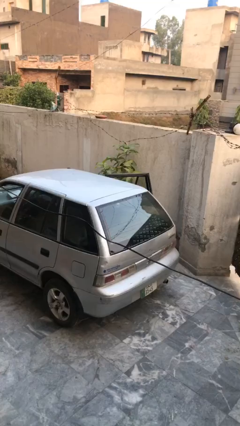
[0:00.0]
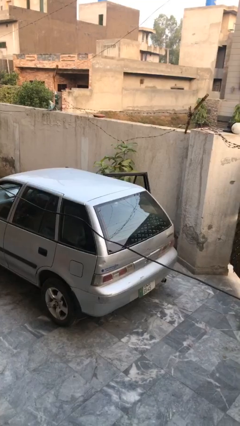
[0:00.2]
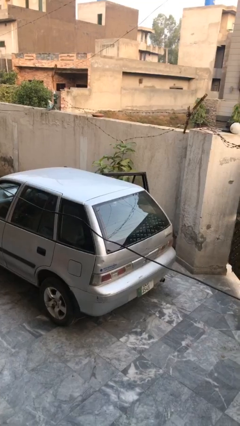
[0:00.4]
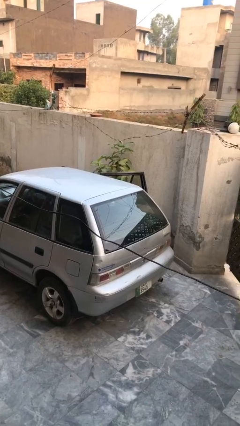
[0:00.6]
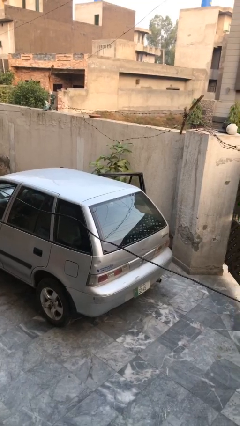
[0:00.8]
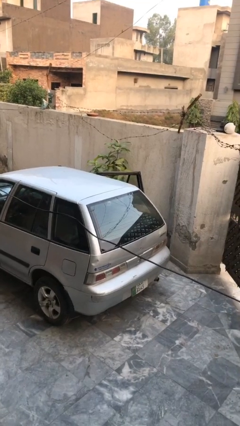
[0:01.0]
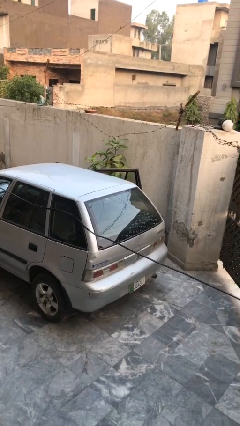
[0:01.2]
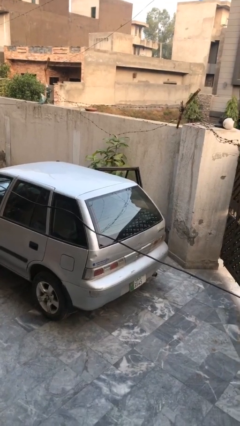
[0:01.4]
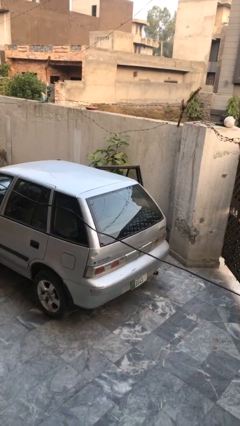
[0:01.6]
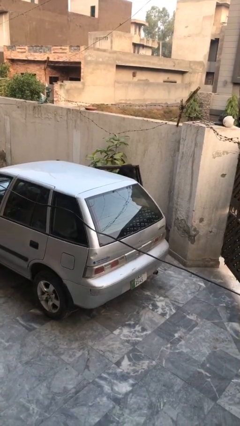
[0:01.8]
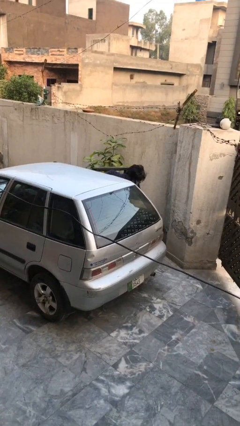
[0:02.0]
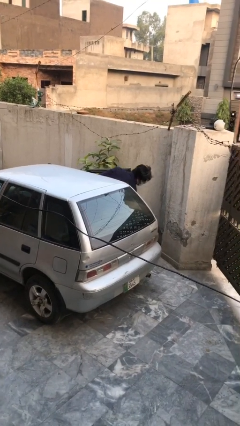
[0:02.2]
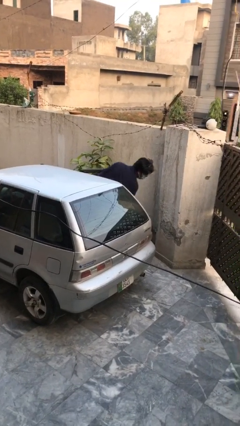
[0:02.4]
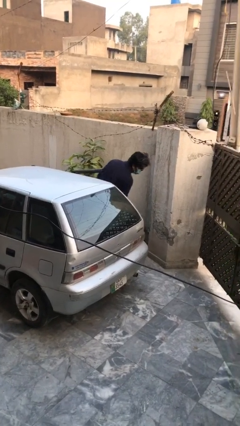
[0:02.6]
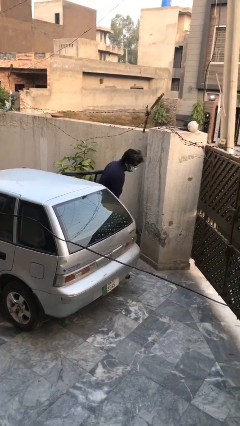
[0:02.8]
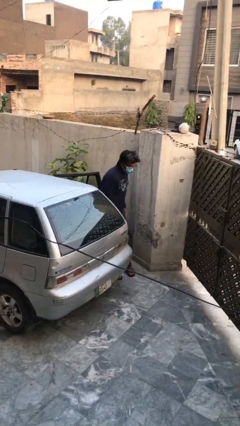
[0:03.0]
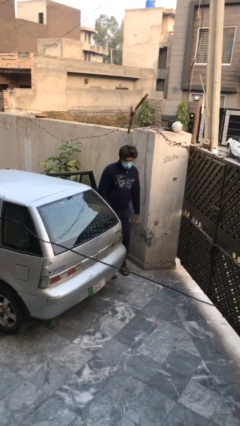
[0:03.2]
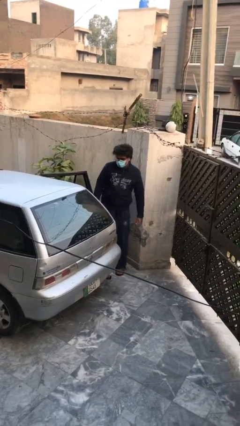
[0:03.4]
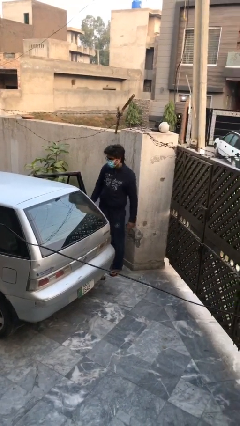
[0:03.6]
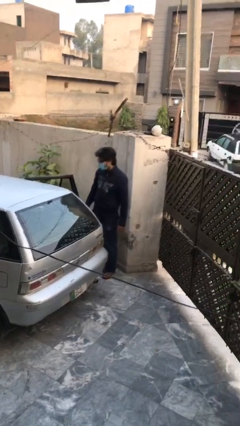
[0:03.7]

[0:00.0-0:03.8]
person exits car

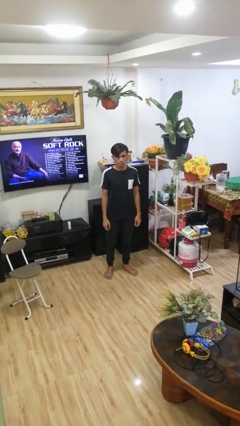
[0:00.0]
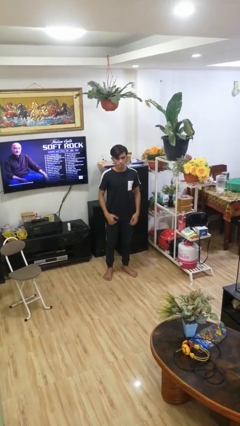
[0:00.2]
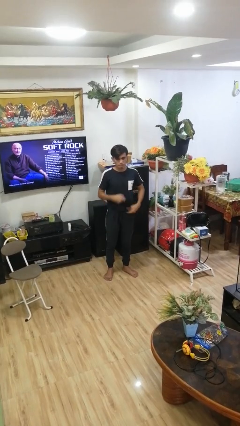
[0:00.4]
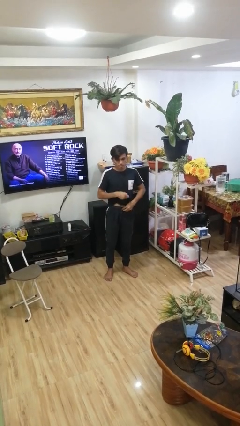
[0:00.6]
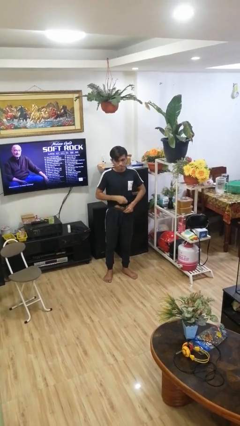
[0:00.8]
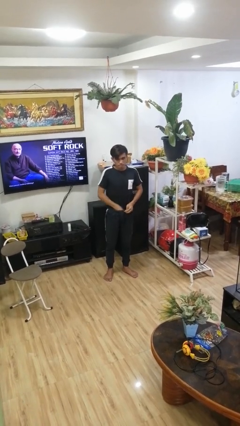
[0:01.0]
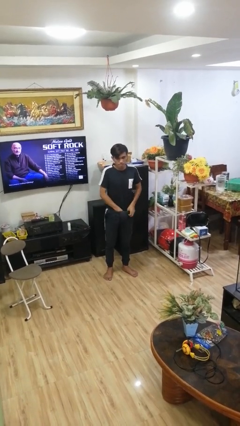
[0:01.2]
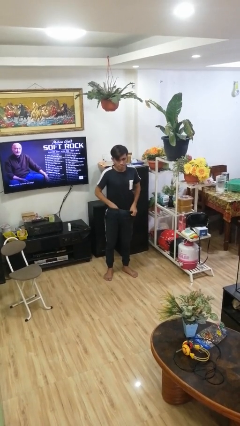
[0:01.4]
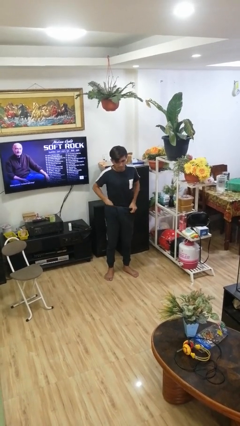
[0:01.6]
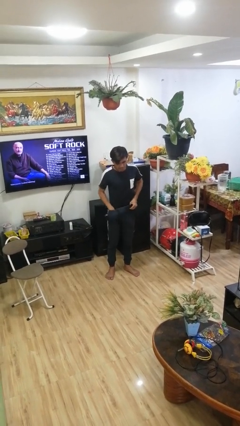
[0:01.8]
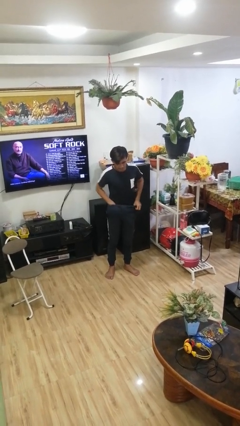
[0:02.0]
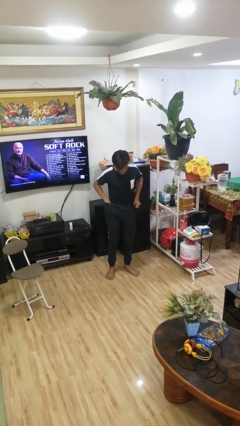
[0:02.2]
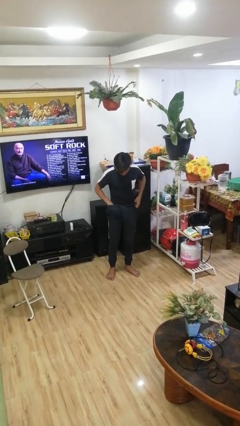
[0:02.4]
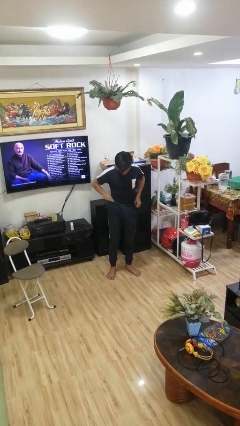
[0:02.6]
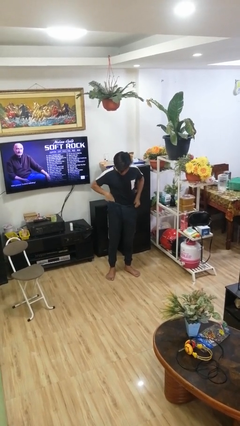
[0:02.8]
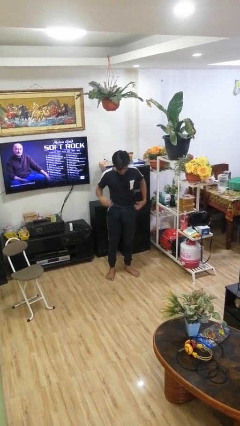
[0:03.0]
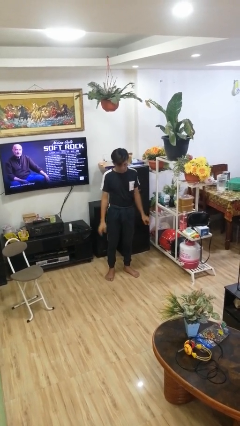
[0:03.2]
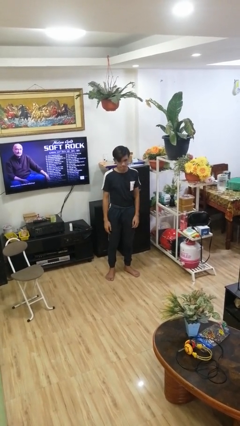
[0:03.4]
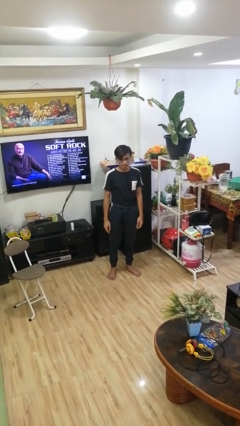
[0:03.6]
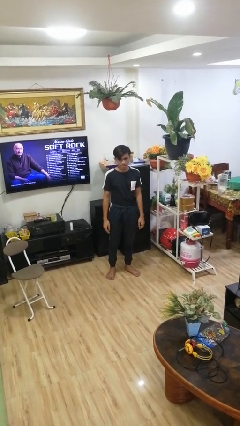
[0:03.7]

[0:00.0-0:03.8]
person tucks in shirt

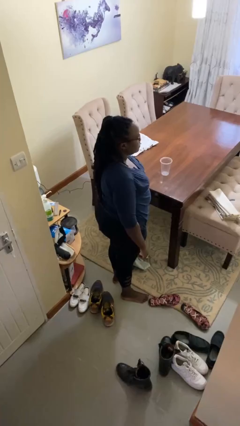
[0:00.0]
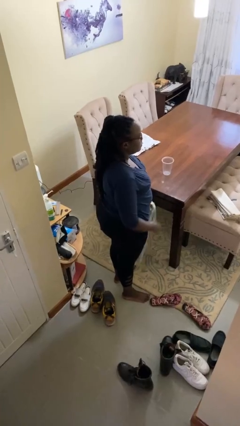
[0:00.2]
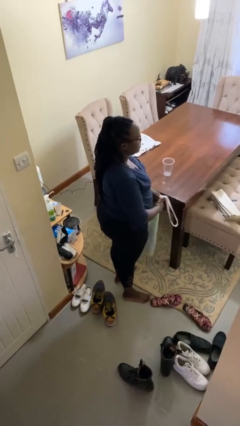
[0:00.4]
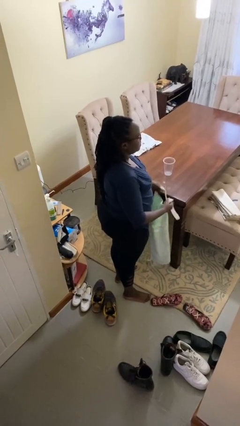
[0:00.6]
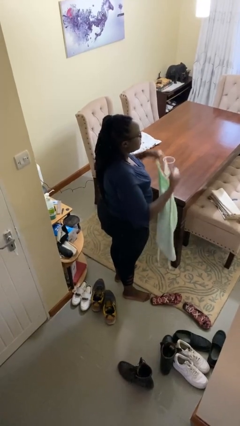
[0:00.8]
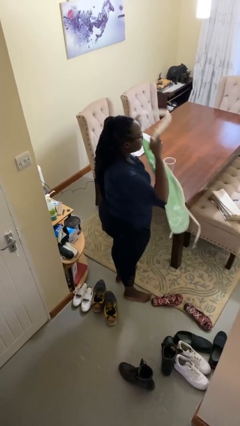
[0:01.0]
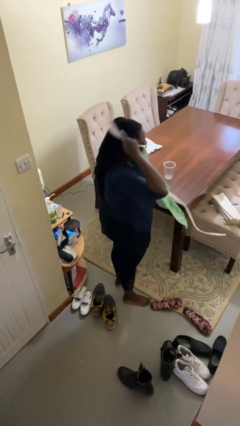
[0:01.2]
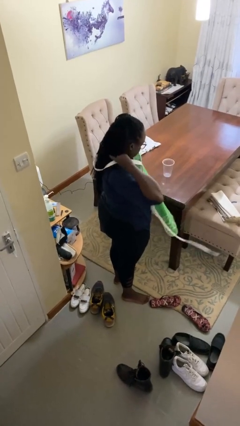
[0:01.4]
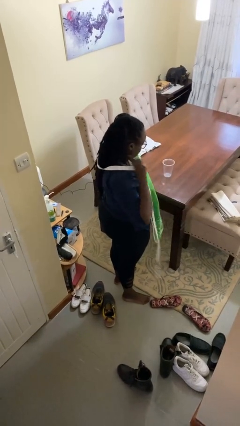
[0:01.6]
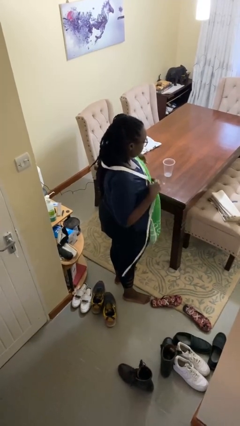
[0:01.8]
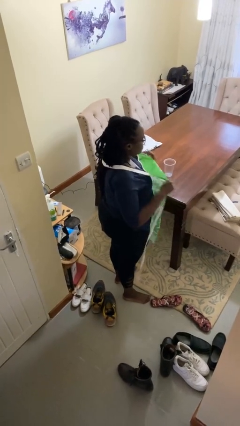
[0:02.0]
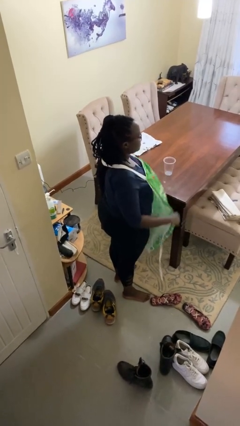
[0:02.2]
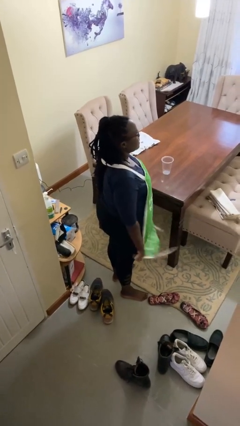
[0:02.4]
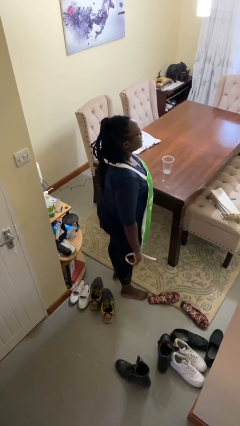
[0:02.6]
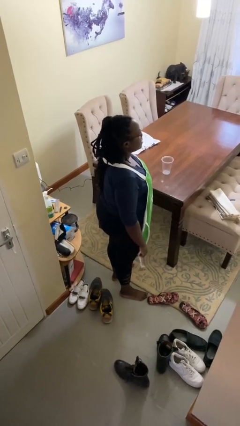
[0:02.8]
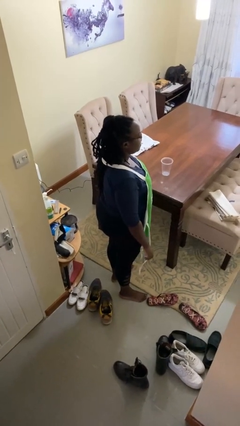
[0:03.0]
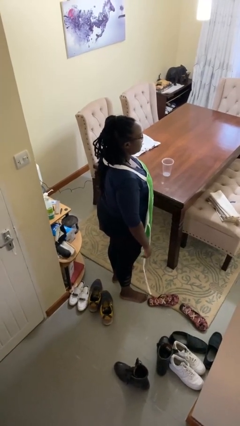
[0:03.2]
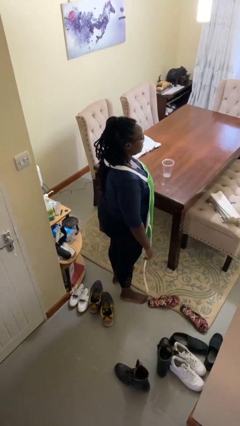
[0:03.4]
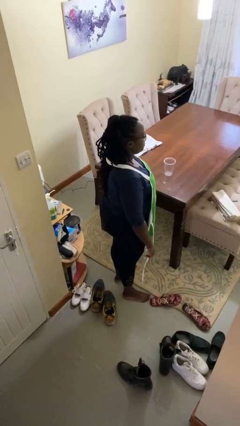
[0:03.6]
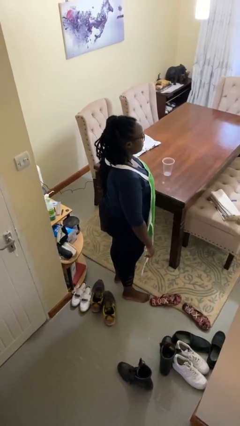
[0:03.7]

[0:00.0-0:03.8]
person puts on apron

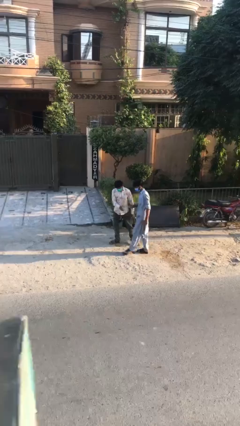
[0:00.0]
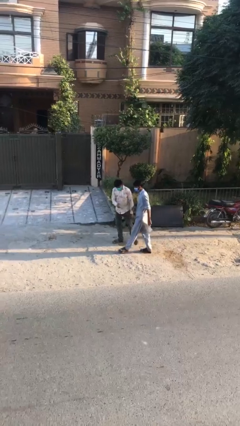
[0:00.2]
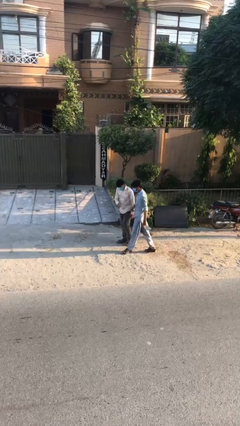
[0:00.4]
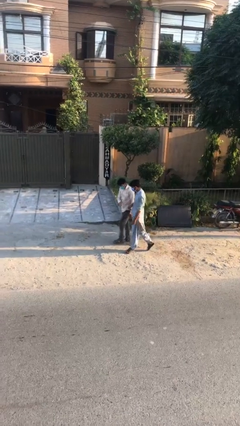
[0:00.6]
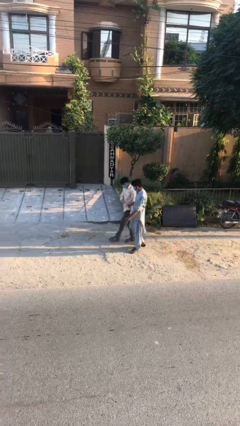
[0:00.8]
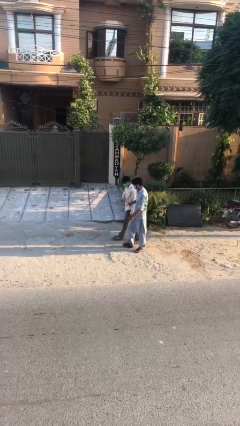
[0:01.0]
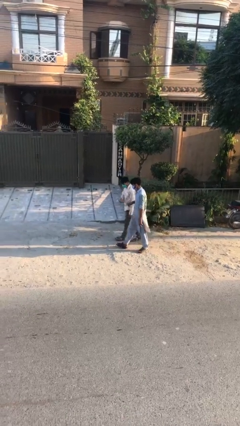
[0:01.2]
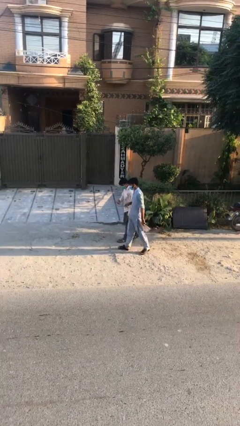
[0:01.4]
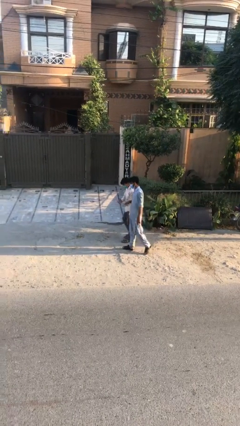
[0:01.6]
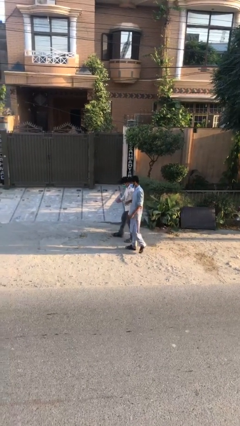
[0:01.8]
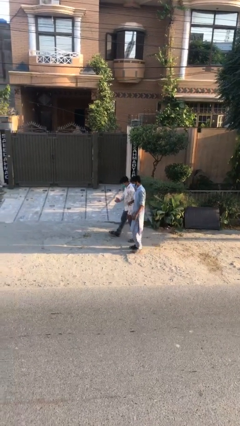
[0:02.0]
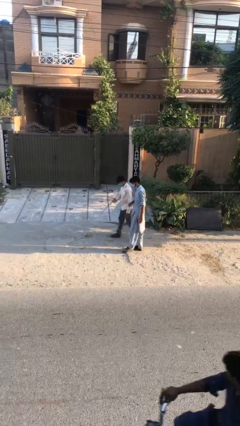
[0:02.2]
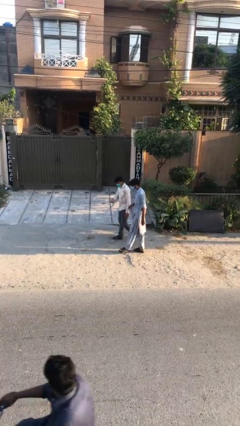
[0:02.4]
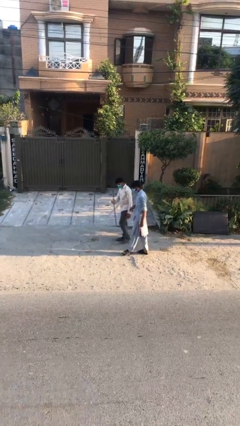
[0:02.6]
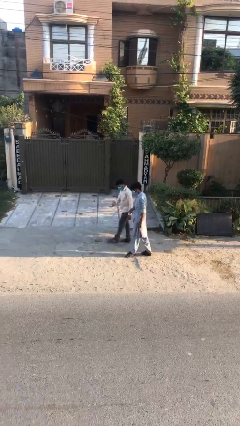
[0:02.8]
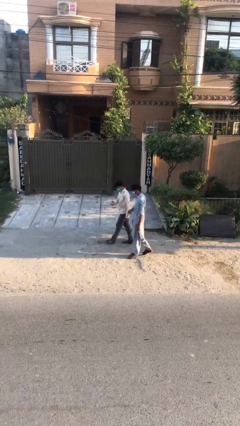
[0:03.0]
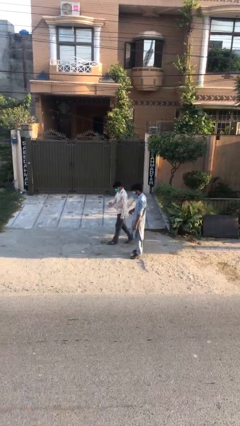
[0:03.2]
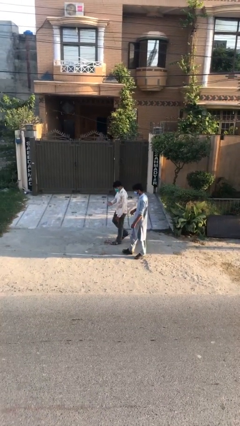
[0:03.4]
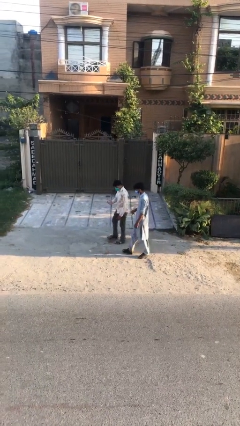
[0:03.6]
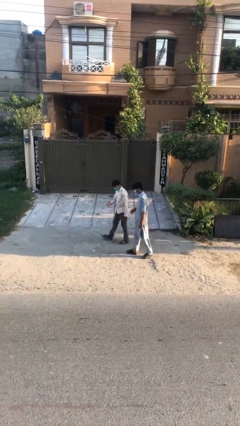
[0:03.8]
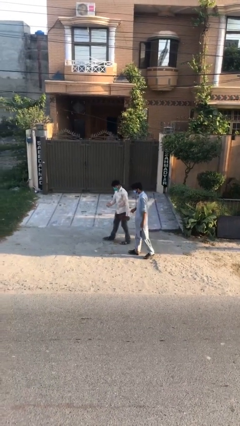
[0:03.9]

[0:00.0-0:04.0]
person talks to person

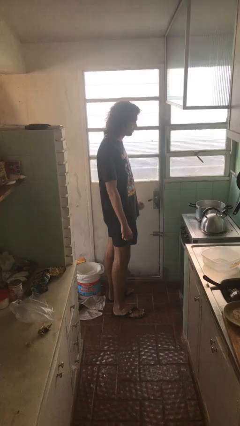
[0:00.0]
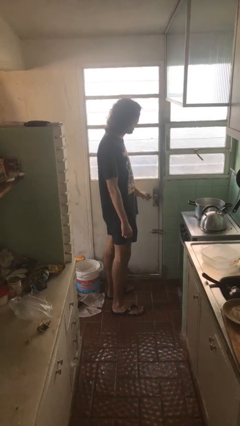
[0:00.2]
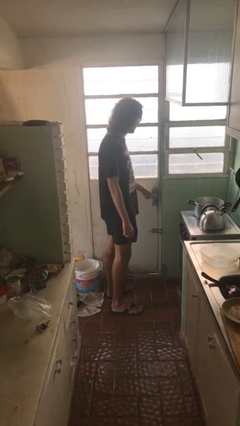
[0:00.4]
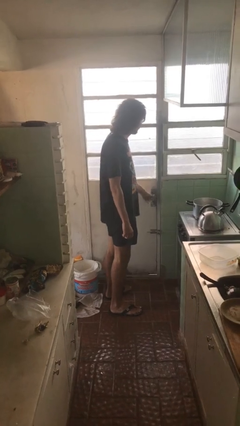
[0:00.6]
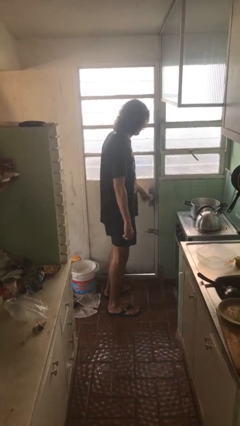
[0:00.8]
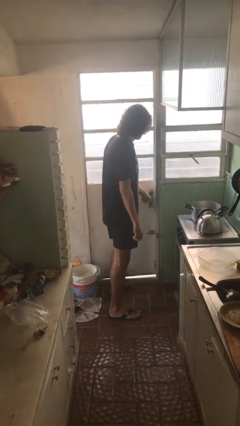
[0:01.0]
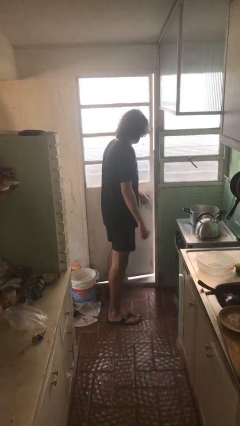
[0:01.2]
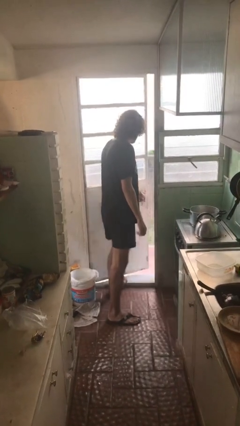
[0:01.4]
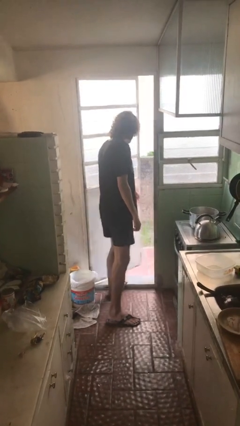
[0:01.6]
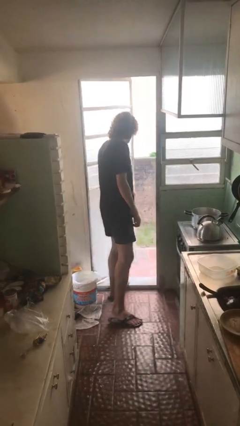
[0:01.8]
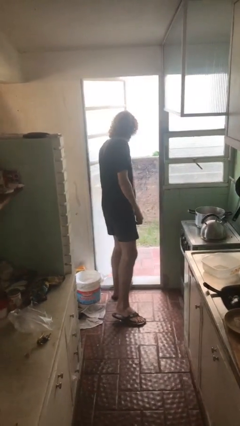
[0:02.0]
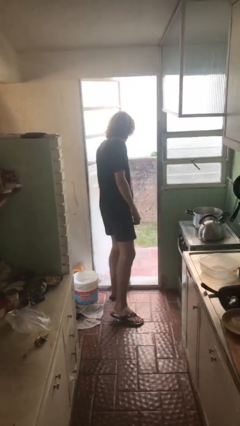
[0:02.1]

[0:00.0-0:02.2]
person opens facility door
